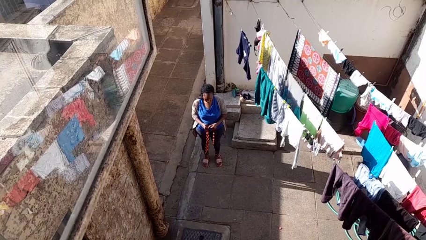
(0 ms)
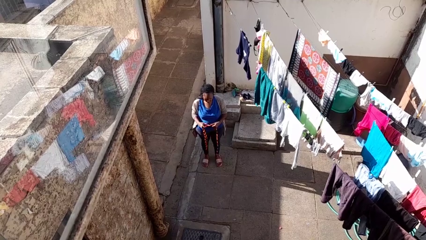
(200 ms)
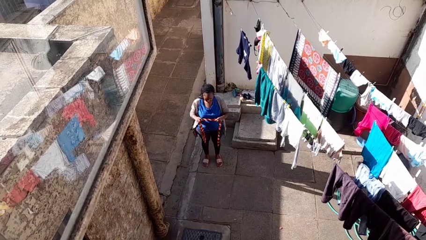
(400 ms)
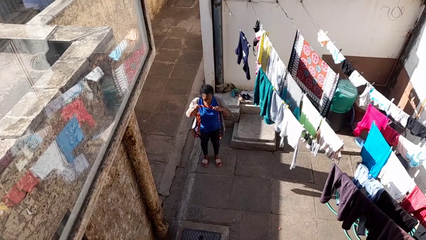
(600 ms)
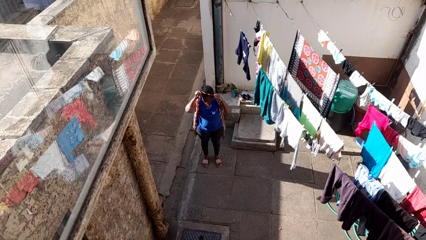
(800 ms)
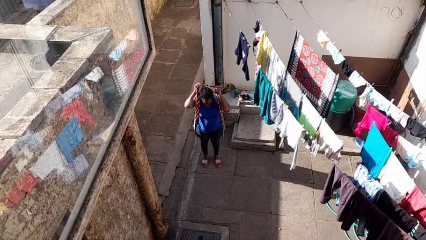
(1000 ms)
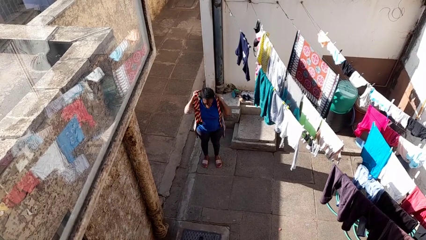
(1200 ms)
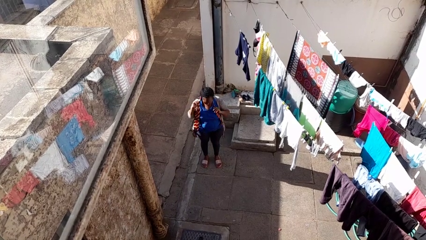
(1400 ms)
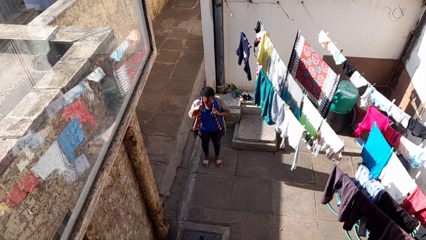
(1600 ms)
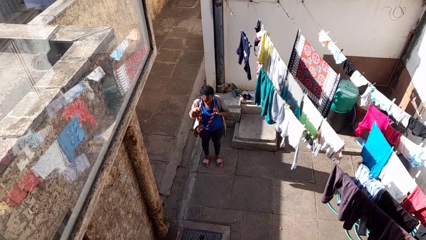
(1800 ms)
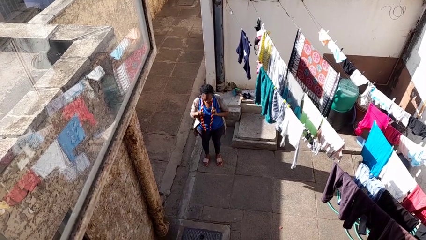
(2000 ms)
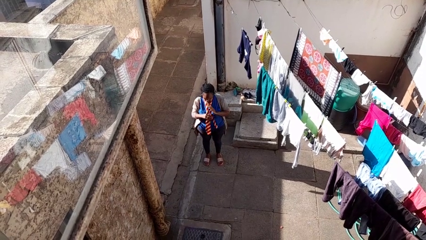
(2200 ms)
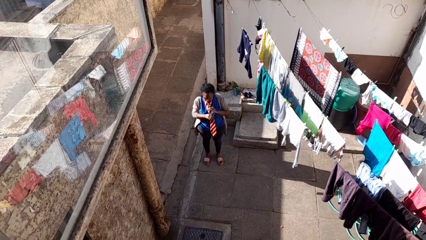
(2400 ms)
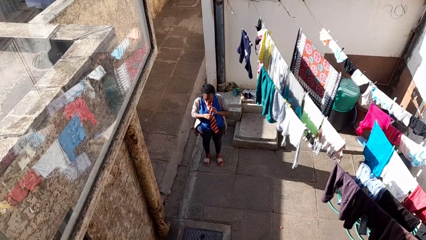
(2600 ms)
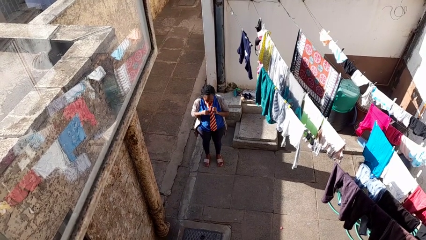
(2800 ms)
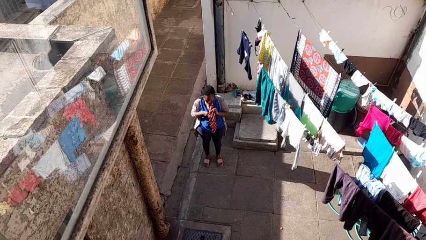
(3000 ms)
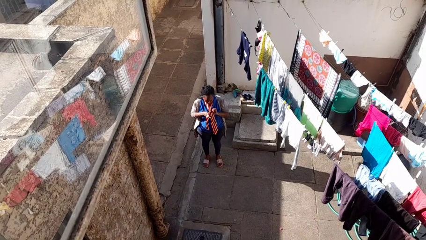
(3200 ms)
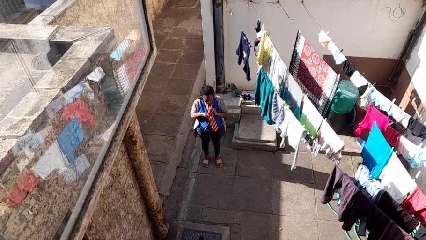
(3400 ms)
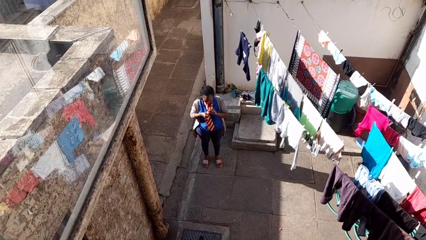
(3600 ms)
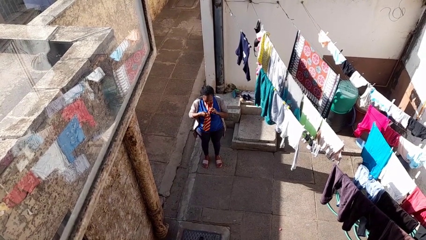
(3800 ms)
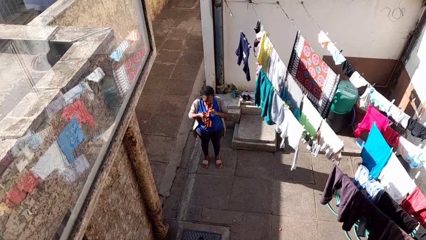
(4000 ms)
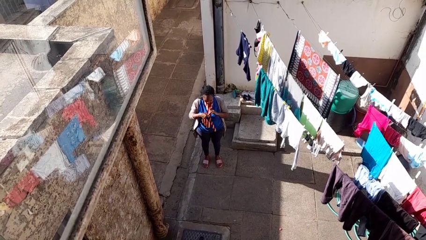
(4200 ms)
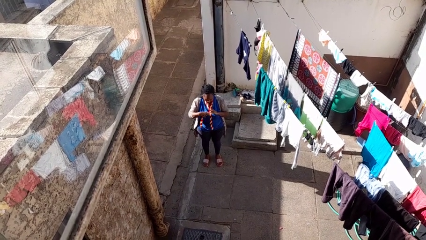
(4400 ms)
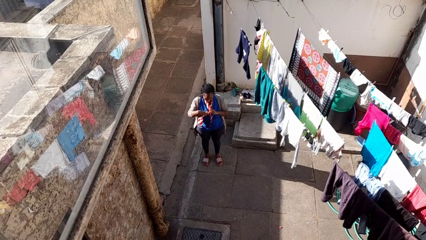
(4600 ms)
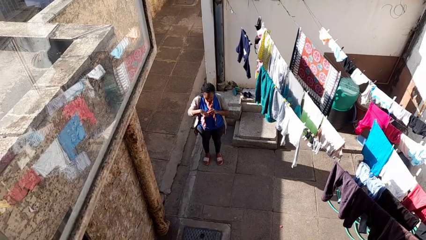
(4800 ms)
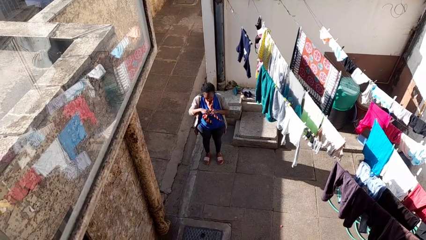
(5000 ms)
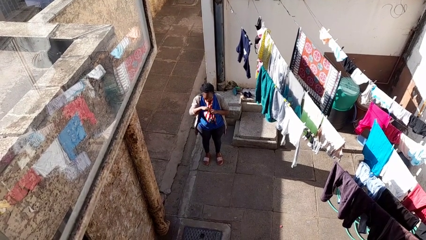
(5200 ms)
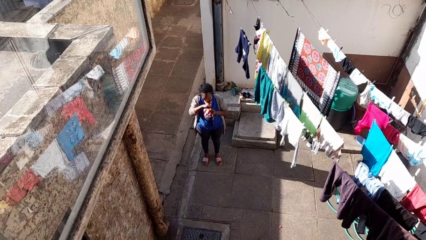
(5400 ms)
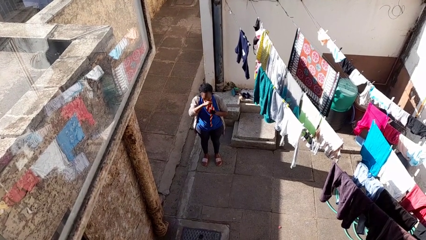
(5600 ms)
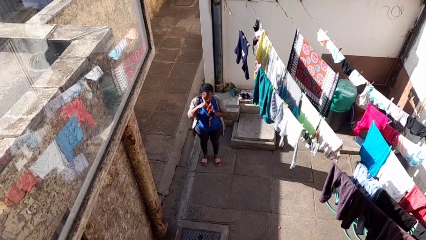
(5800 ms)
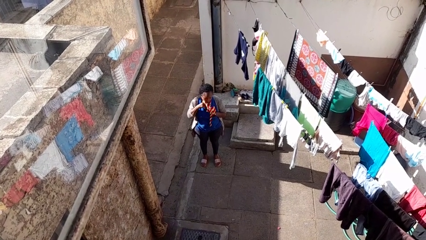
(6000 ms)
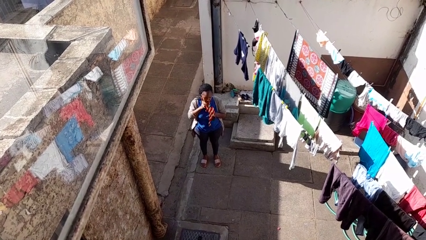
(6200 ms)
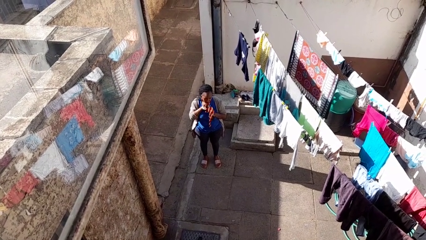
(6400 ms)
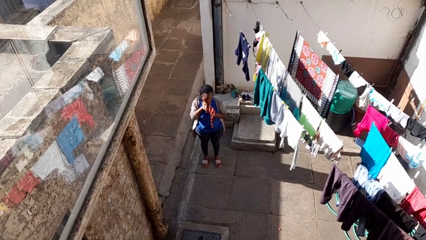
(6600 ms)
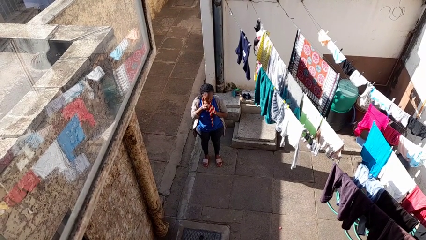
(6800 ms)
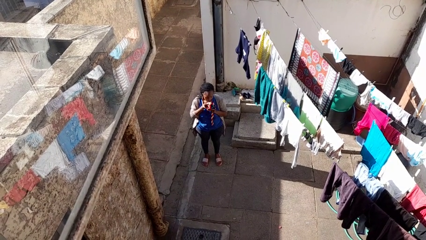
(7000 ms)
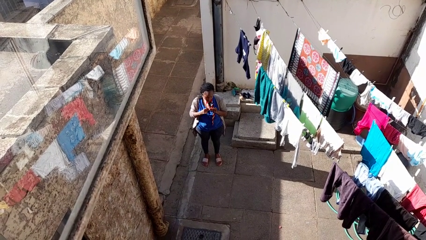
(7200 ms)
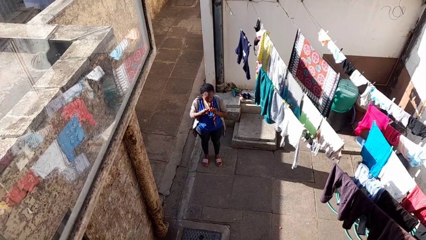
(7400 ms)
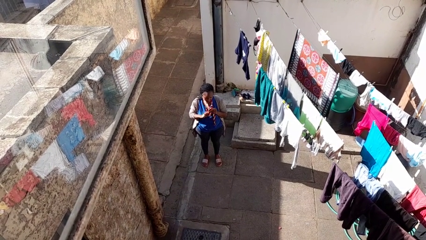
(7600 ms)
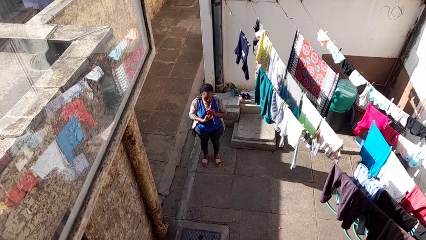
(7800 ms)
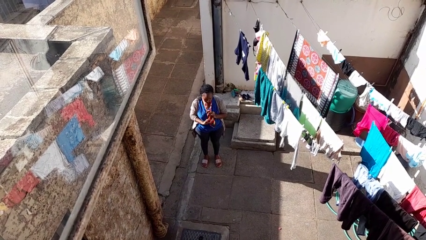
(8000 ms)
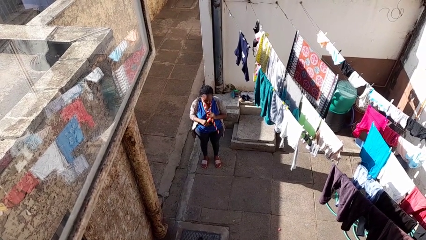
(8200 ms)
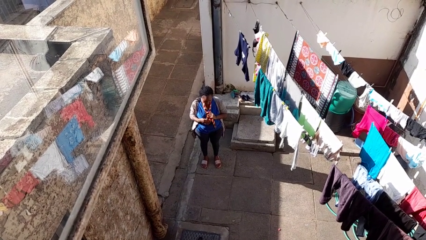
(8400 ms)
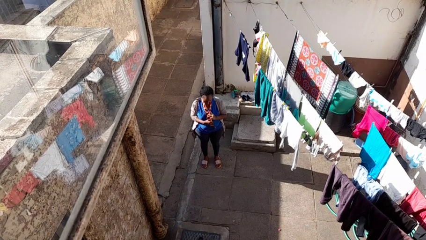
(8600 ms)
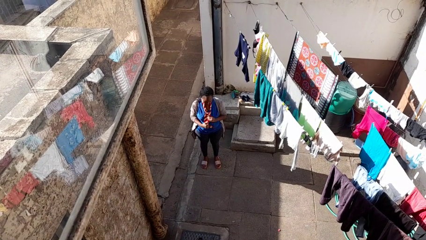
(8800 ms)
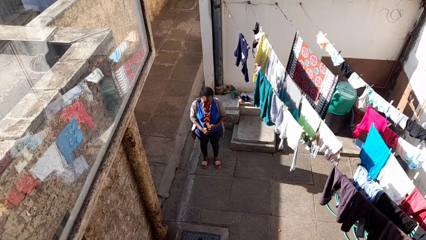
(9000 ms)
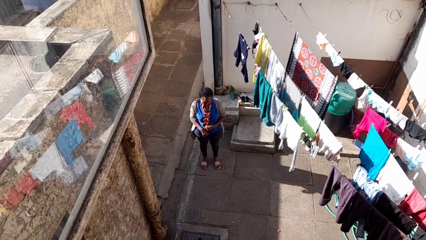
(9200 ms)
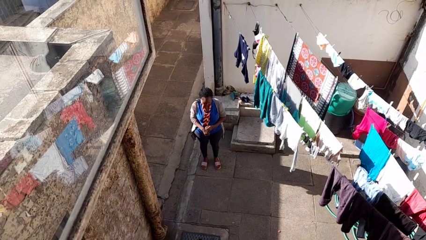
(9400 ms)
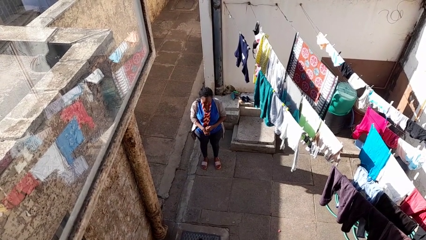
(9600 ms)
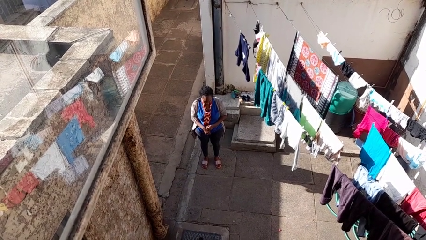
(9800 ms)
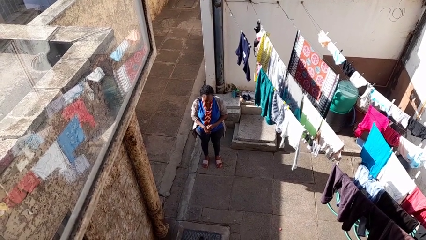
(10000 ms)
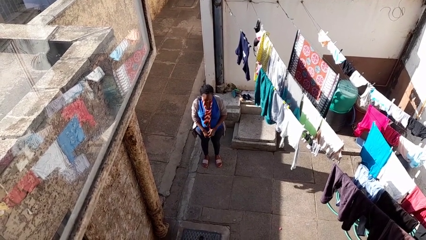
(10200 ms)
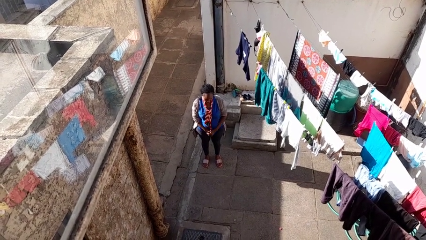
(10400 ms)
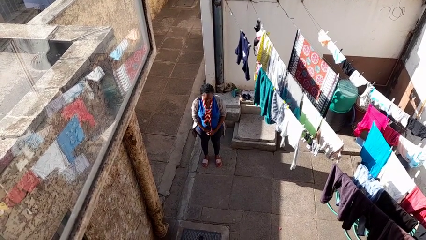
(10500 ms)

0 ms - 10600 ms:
person puts on necktie

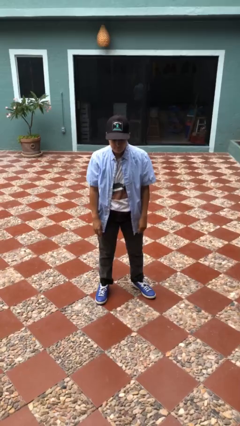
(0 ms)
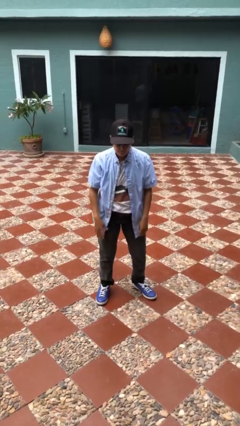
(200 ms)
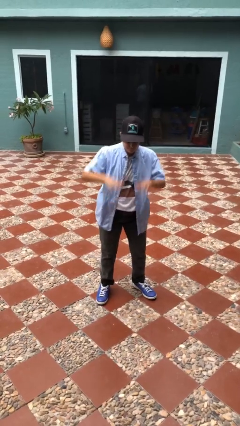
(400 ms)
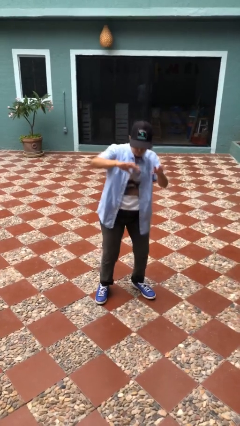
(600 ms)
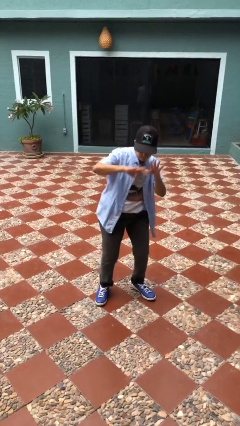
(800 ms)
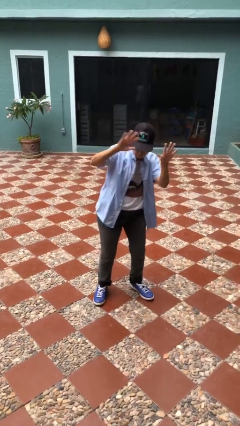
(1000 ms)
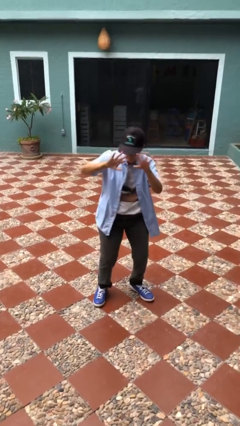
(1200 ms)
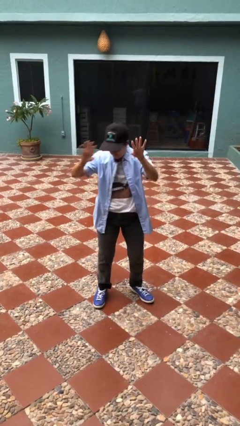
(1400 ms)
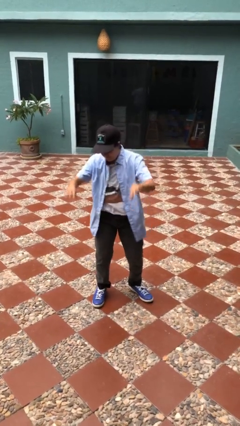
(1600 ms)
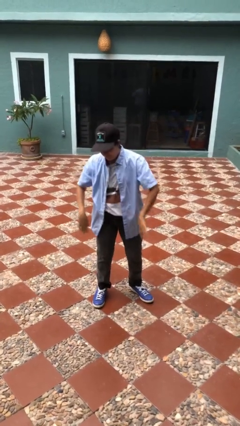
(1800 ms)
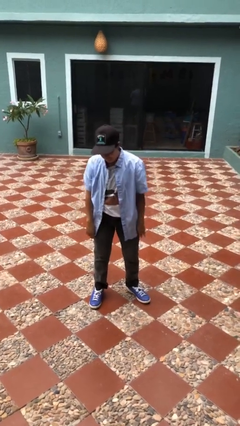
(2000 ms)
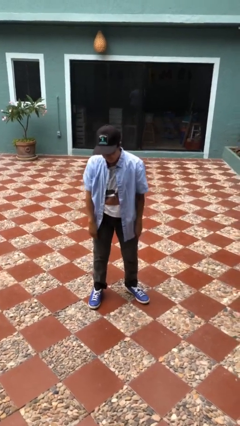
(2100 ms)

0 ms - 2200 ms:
person dances in place

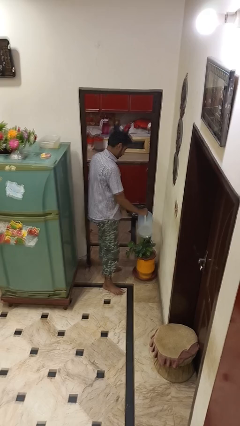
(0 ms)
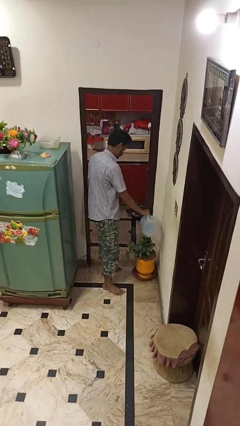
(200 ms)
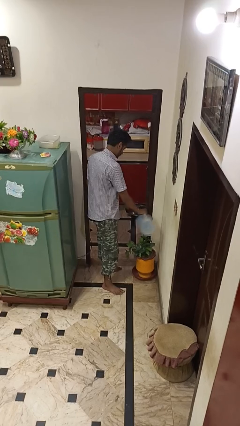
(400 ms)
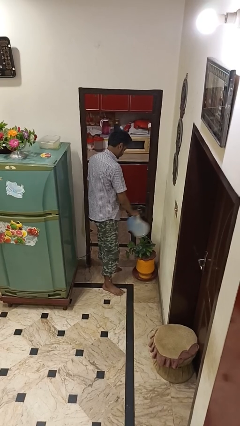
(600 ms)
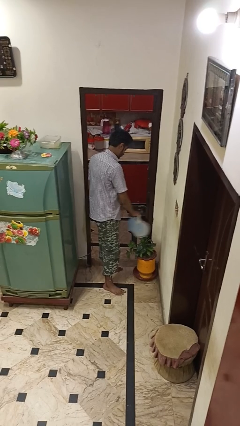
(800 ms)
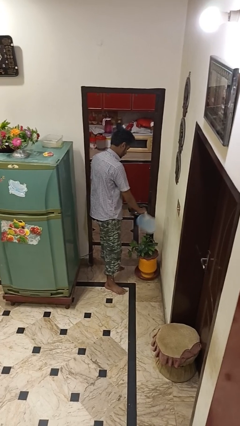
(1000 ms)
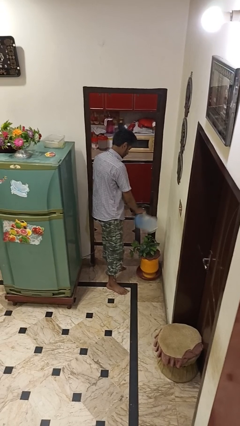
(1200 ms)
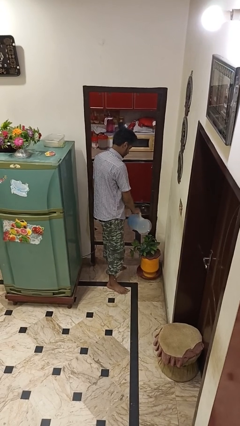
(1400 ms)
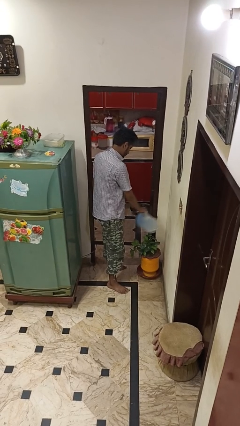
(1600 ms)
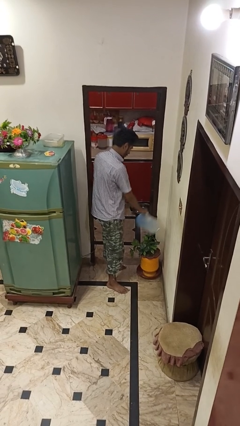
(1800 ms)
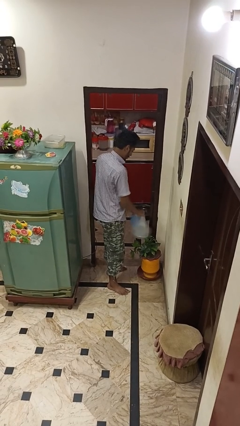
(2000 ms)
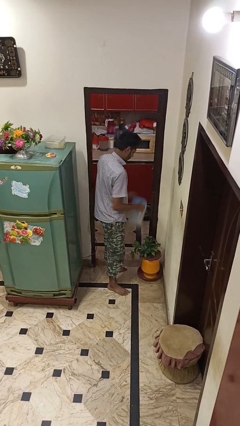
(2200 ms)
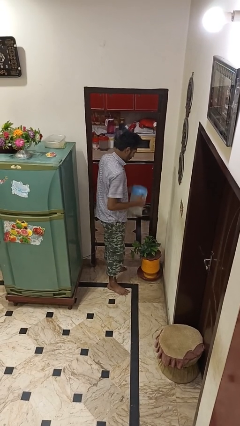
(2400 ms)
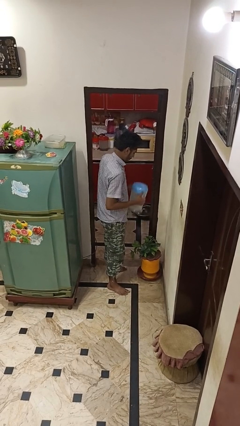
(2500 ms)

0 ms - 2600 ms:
person waters houseplant

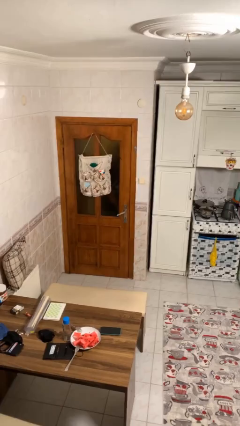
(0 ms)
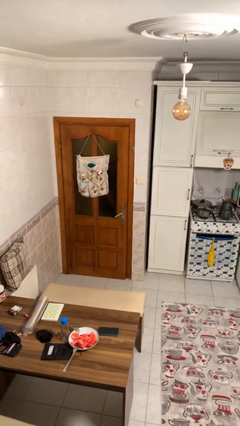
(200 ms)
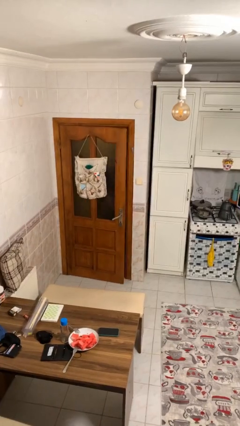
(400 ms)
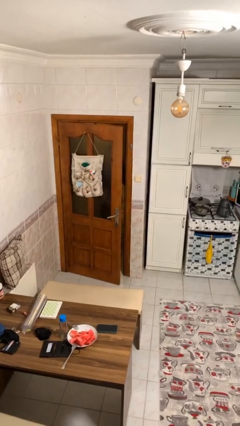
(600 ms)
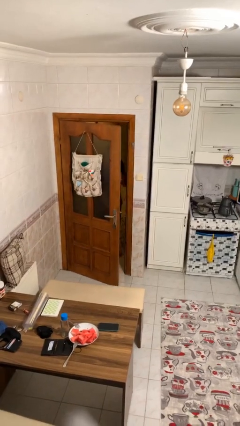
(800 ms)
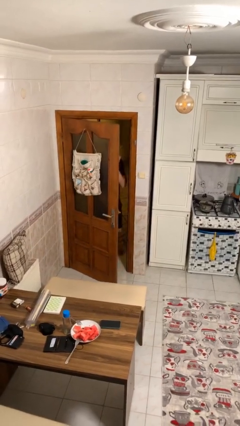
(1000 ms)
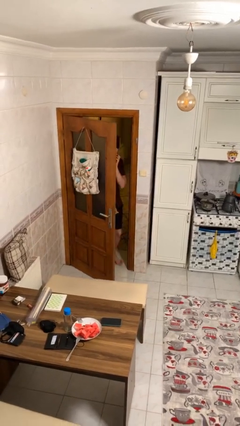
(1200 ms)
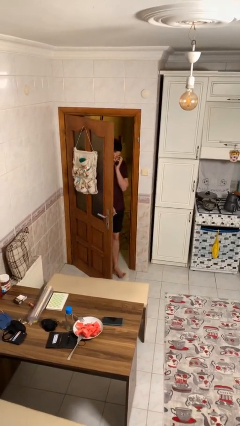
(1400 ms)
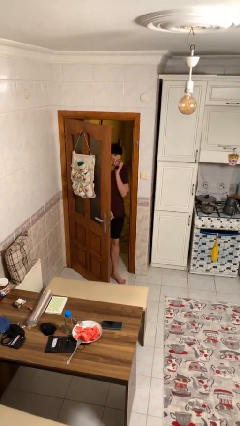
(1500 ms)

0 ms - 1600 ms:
person opens facility door

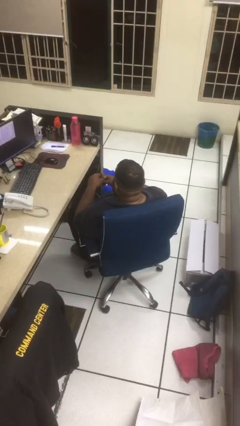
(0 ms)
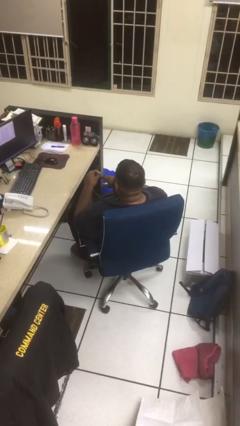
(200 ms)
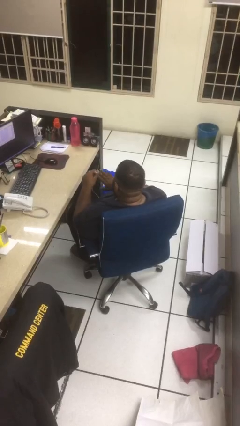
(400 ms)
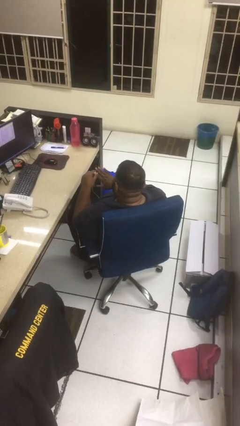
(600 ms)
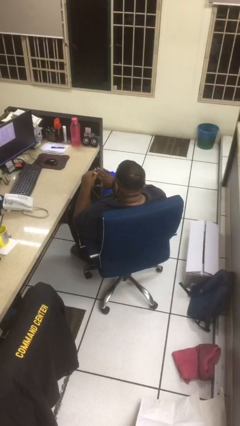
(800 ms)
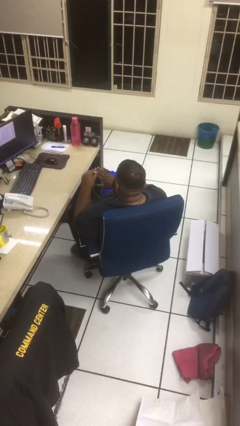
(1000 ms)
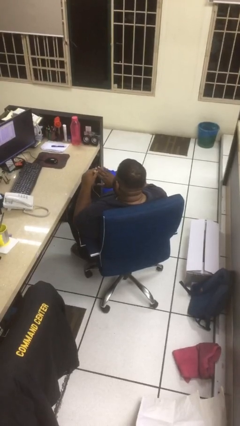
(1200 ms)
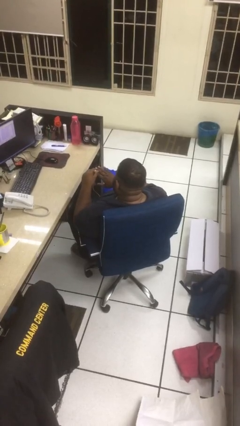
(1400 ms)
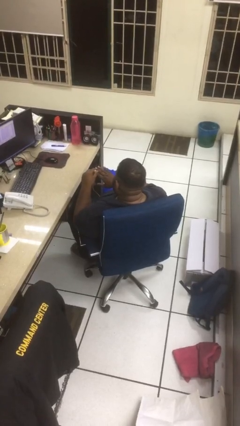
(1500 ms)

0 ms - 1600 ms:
person paints fingernails
